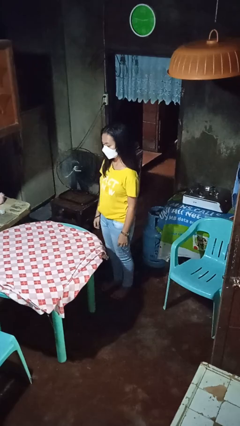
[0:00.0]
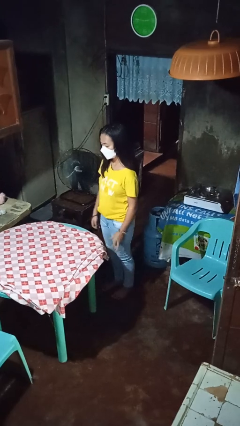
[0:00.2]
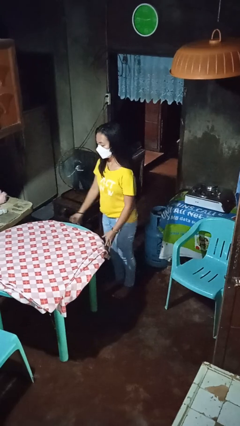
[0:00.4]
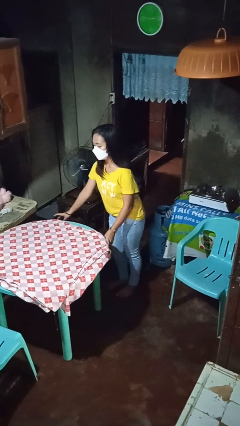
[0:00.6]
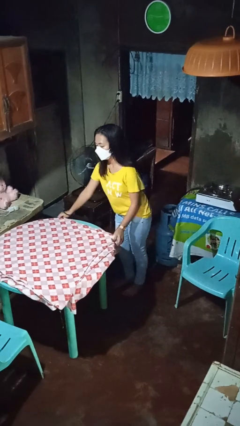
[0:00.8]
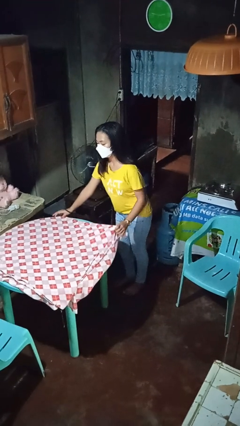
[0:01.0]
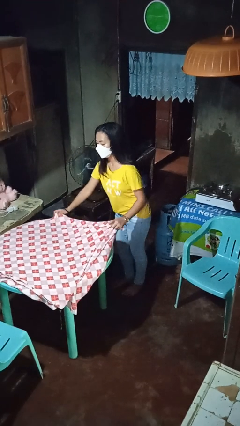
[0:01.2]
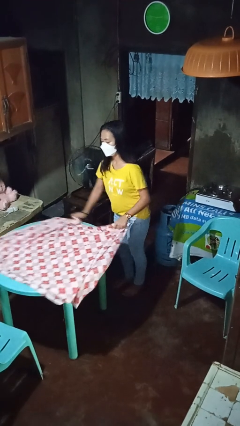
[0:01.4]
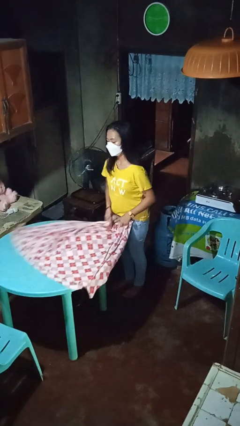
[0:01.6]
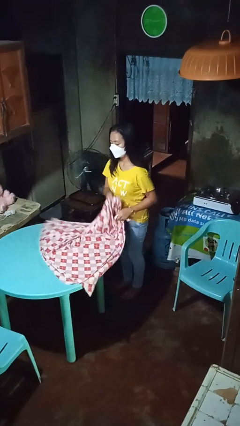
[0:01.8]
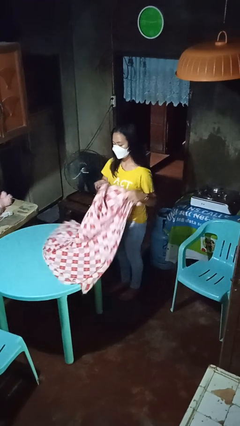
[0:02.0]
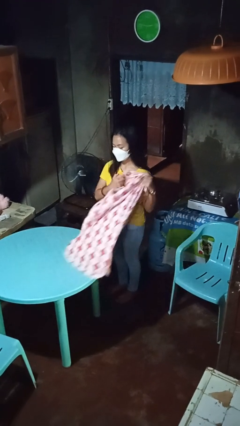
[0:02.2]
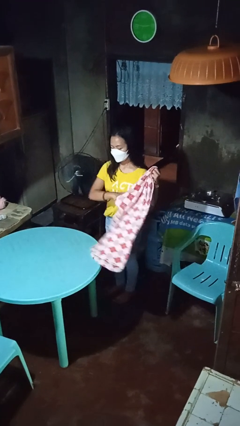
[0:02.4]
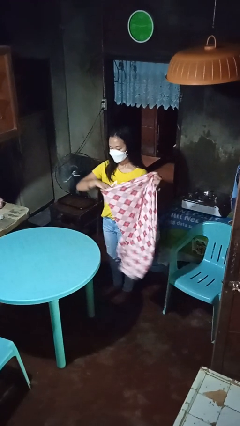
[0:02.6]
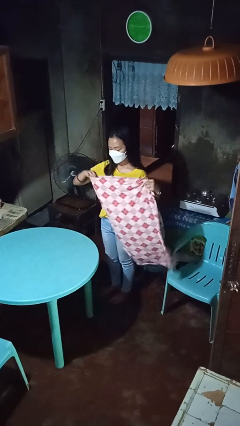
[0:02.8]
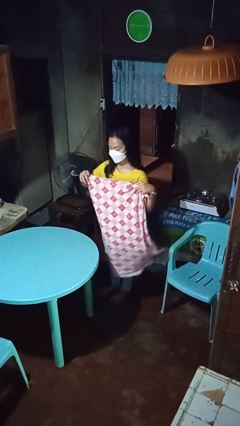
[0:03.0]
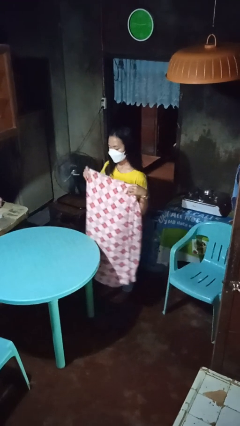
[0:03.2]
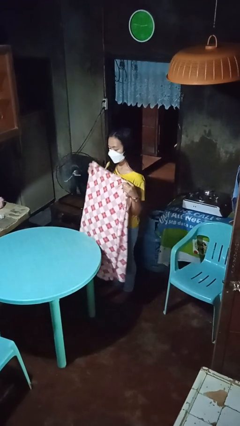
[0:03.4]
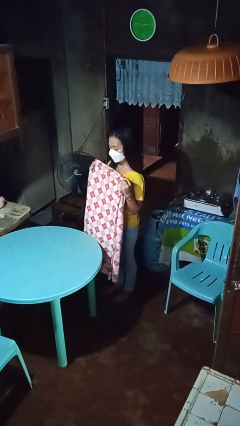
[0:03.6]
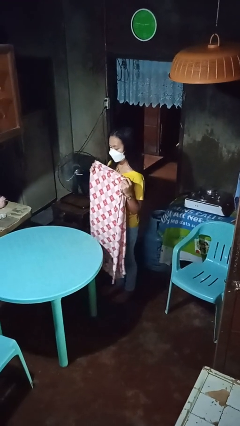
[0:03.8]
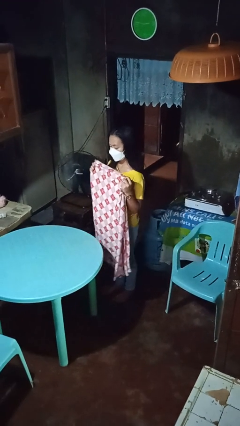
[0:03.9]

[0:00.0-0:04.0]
person folds tablecloth

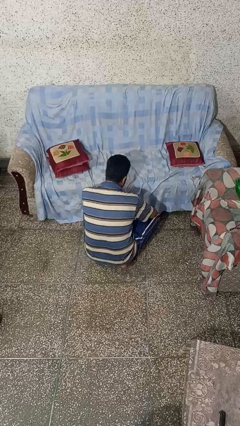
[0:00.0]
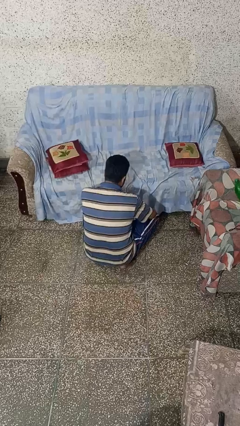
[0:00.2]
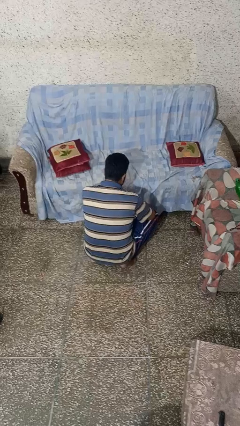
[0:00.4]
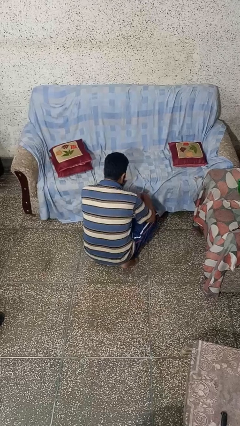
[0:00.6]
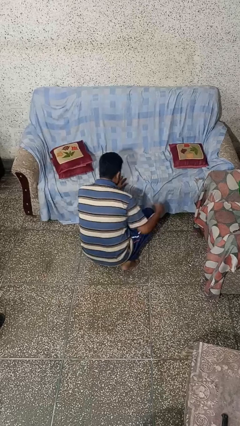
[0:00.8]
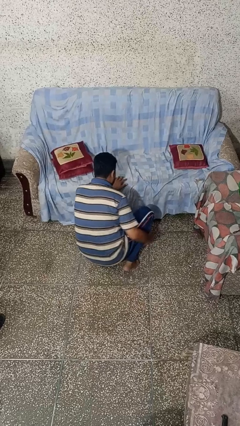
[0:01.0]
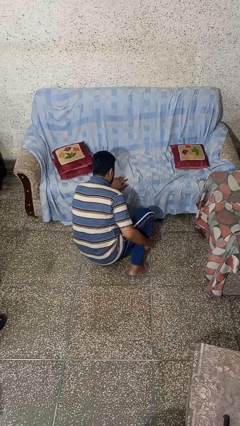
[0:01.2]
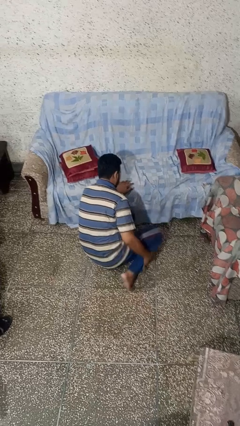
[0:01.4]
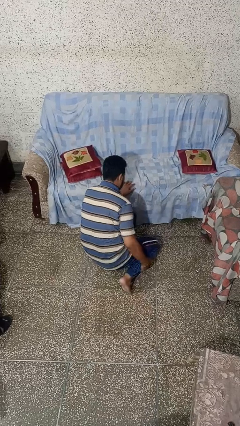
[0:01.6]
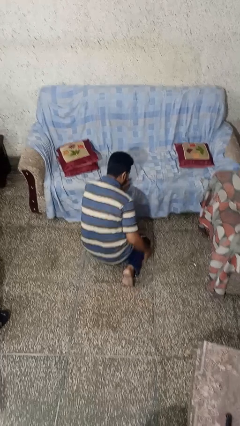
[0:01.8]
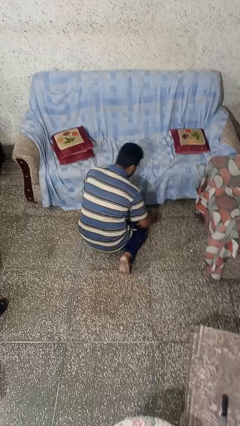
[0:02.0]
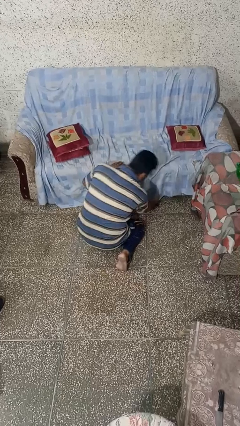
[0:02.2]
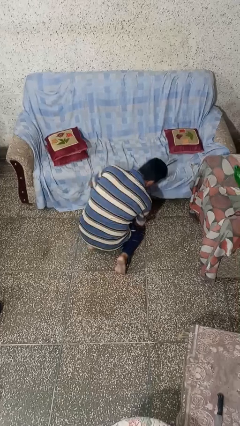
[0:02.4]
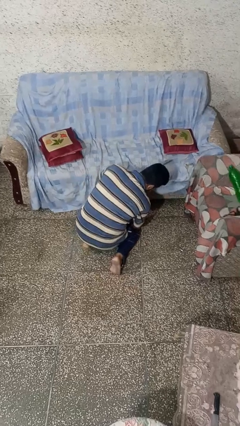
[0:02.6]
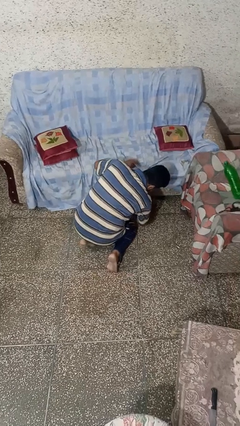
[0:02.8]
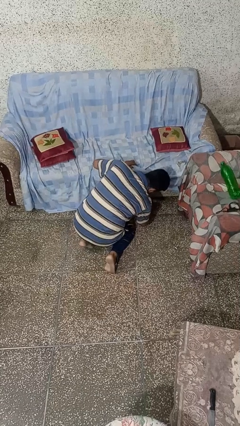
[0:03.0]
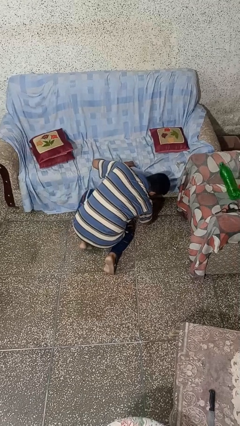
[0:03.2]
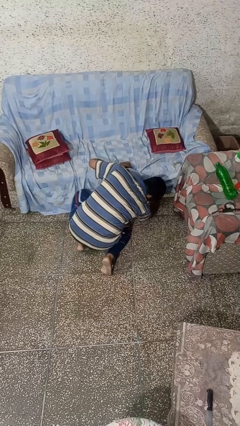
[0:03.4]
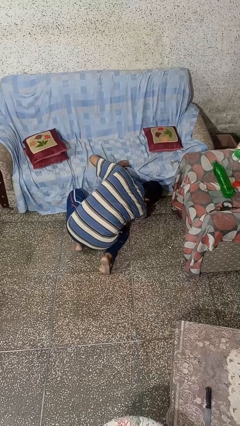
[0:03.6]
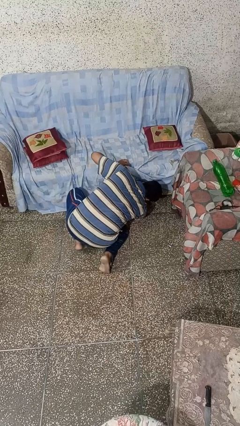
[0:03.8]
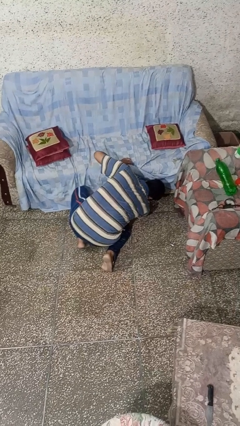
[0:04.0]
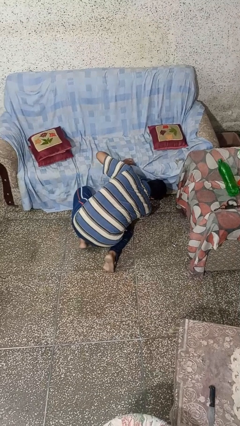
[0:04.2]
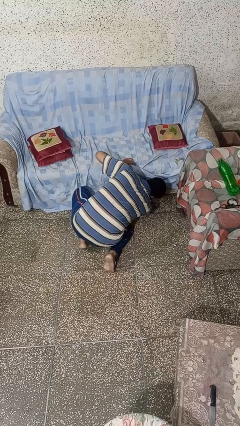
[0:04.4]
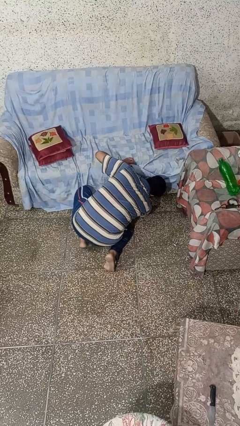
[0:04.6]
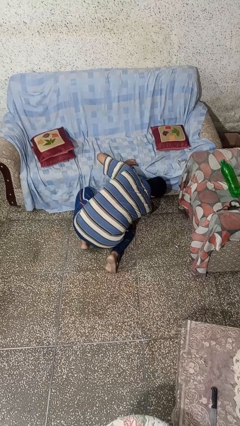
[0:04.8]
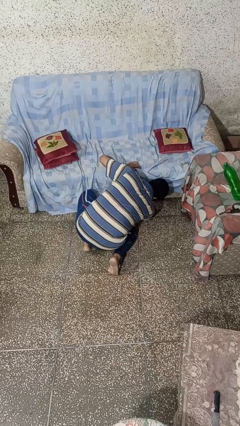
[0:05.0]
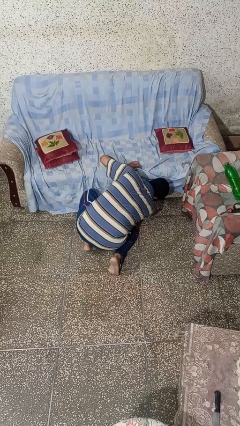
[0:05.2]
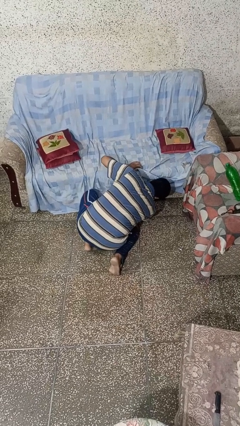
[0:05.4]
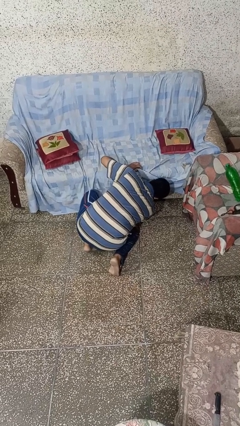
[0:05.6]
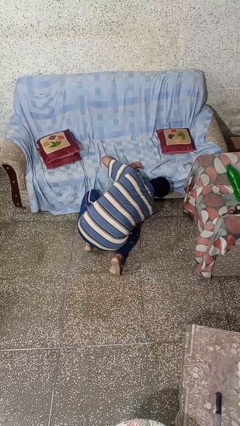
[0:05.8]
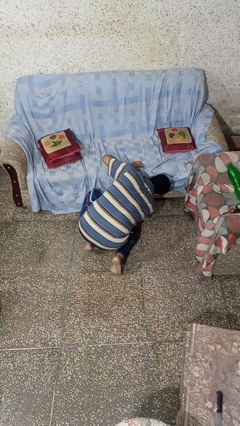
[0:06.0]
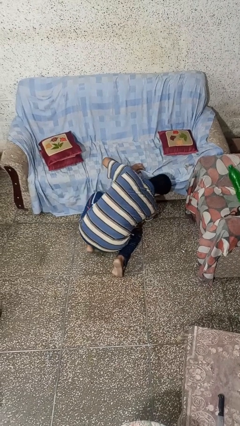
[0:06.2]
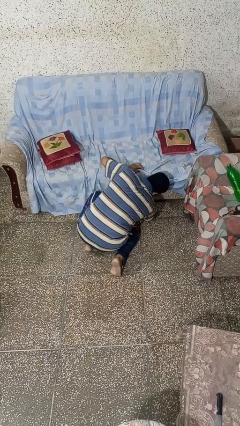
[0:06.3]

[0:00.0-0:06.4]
person searches under couch

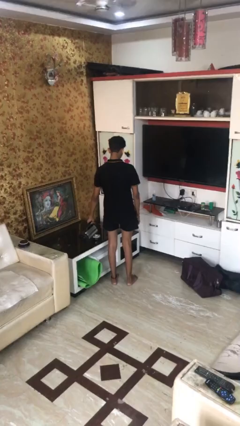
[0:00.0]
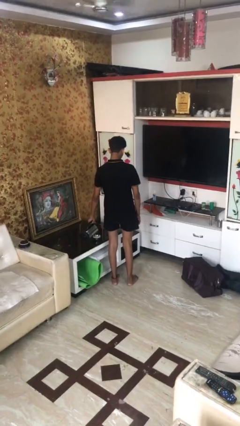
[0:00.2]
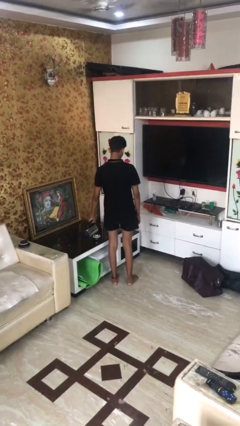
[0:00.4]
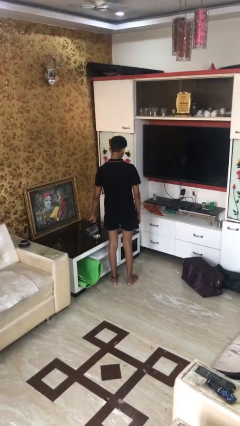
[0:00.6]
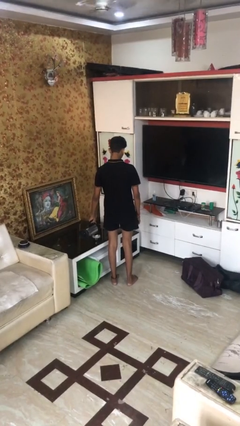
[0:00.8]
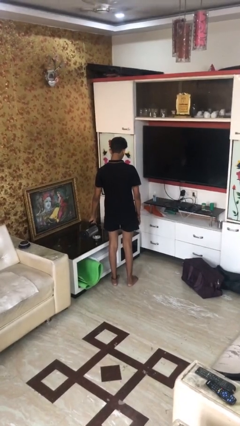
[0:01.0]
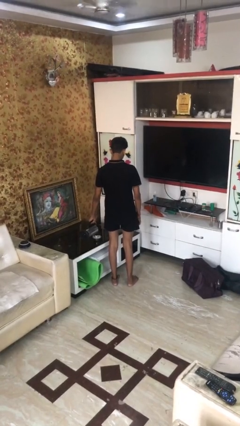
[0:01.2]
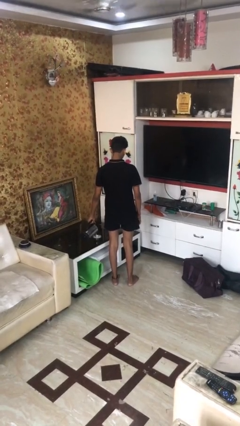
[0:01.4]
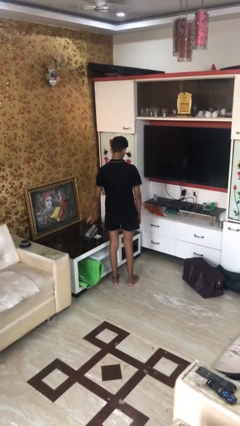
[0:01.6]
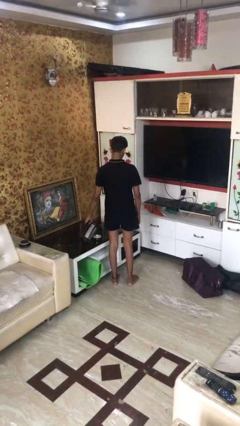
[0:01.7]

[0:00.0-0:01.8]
person pours into bowl

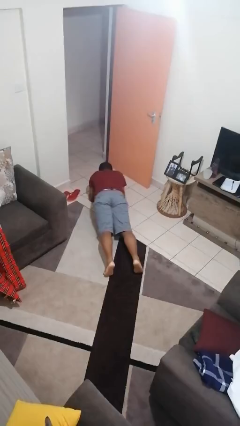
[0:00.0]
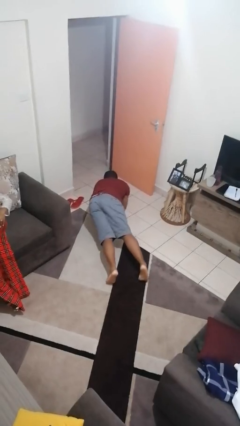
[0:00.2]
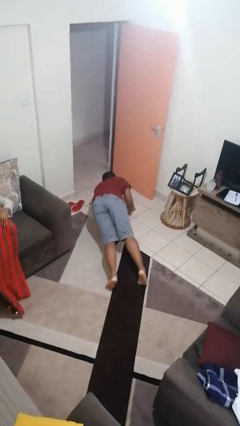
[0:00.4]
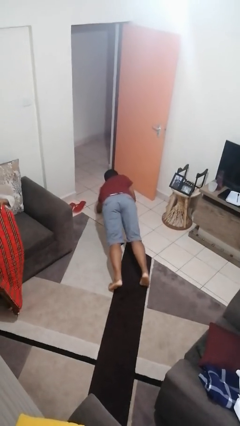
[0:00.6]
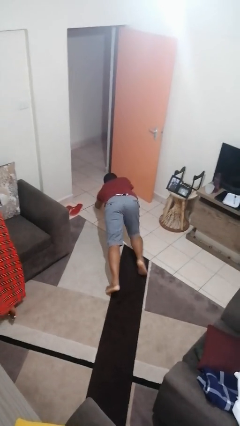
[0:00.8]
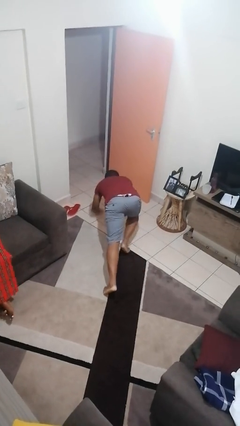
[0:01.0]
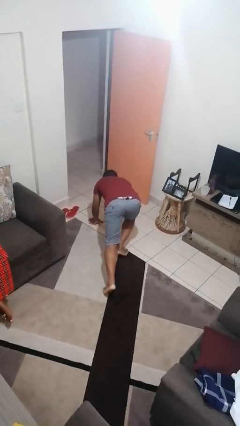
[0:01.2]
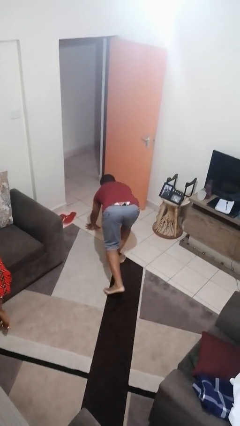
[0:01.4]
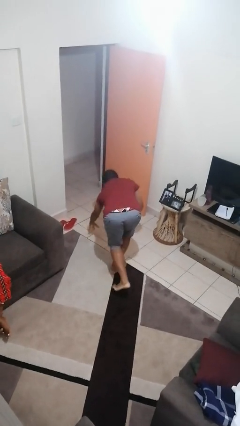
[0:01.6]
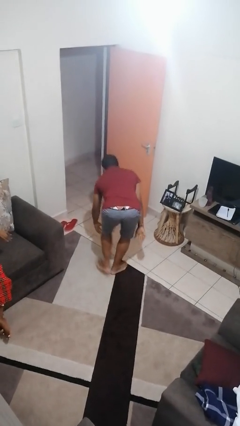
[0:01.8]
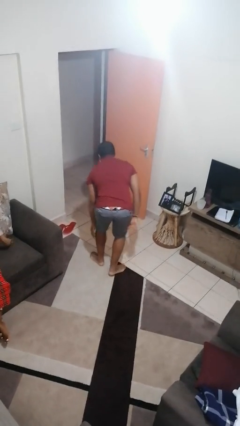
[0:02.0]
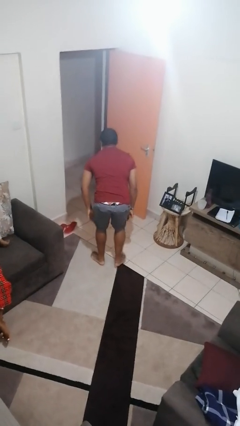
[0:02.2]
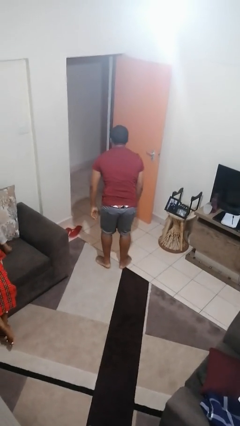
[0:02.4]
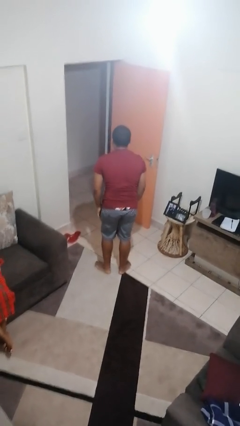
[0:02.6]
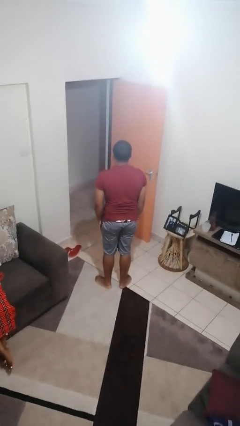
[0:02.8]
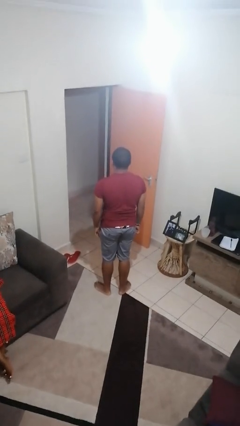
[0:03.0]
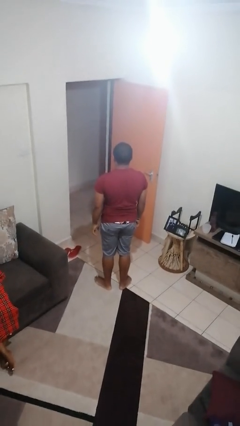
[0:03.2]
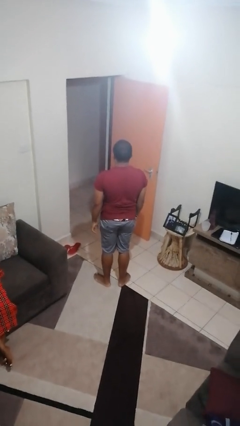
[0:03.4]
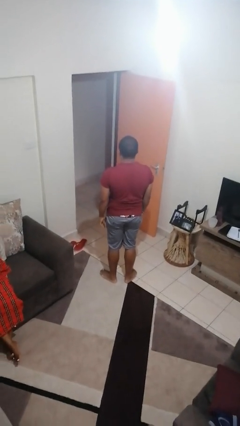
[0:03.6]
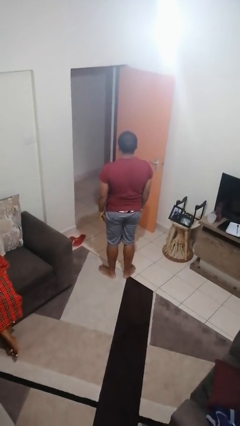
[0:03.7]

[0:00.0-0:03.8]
person stands up from floor

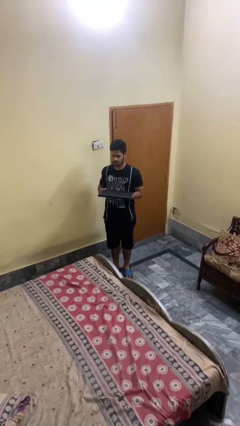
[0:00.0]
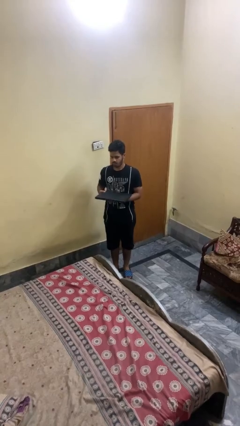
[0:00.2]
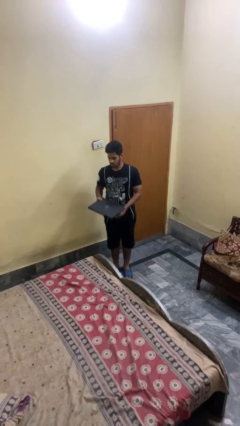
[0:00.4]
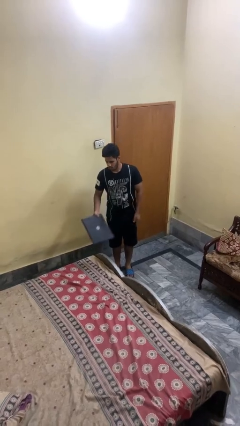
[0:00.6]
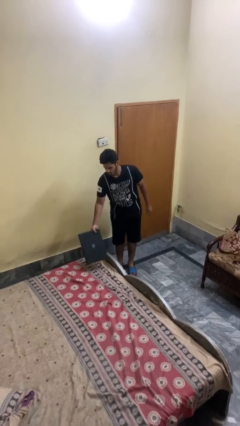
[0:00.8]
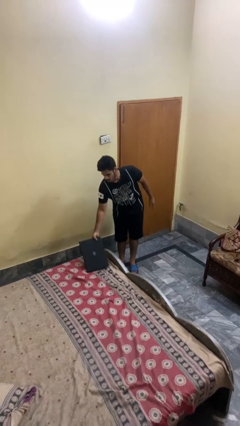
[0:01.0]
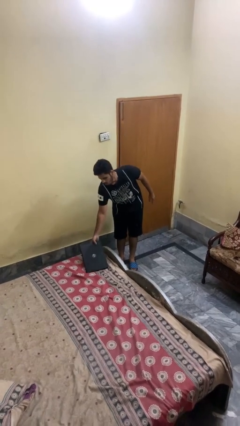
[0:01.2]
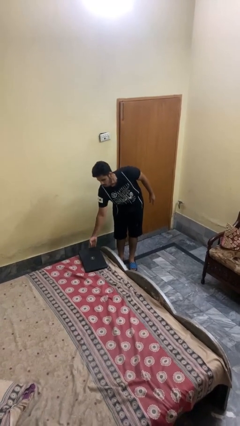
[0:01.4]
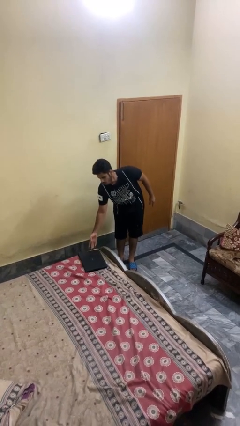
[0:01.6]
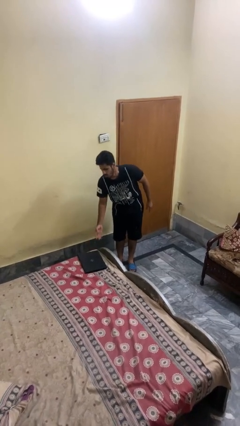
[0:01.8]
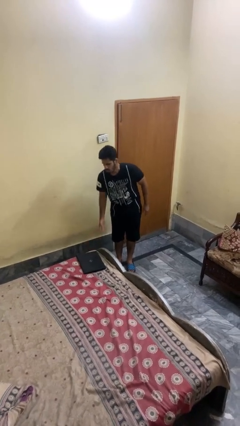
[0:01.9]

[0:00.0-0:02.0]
person puts down object on bed
